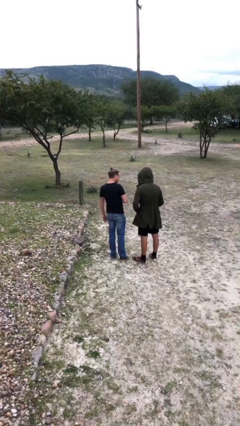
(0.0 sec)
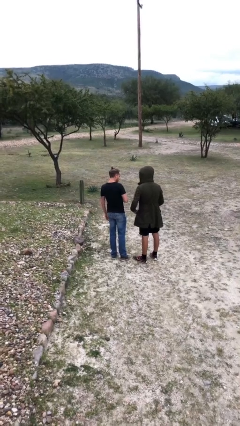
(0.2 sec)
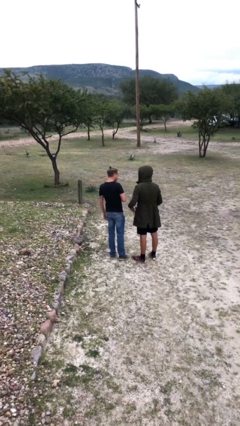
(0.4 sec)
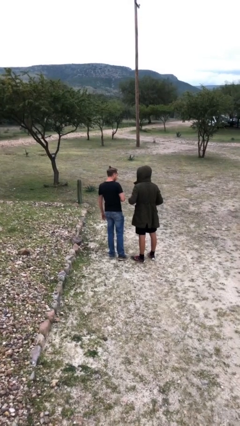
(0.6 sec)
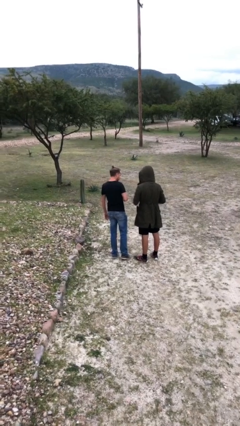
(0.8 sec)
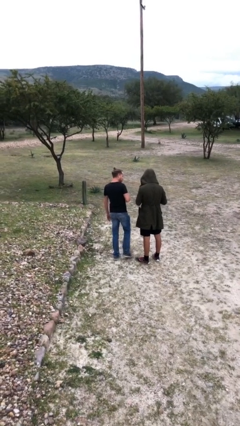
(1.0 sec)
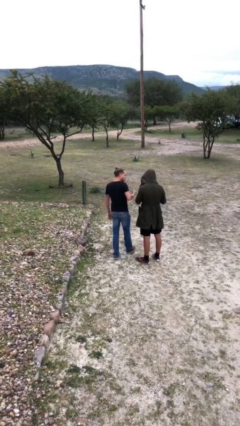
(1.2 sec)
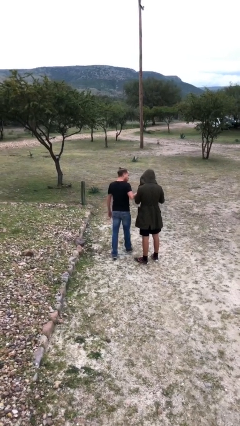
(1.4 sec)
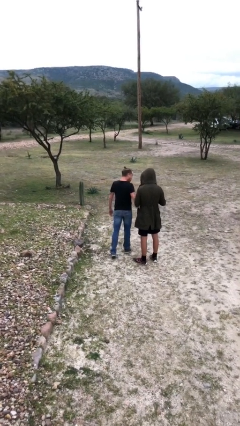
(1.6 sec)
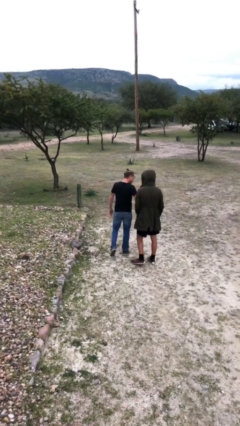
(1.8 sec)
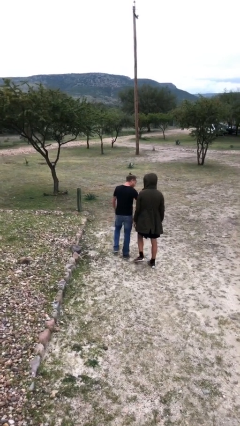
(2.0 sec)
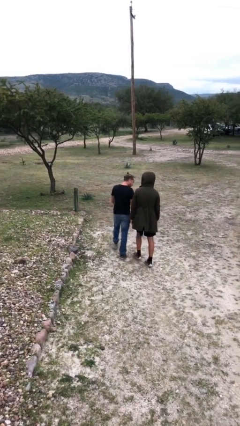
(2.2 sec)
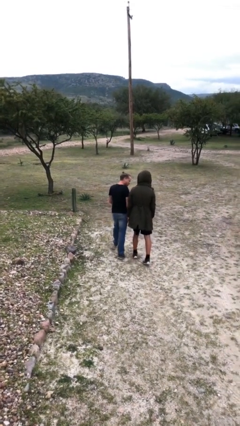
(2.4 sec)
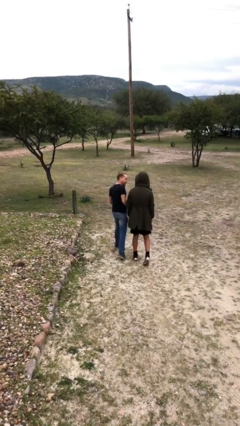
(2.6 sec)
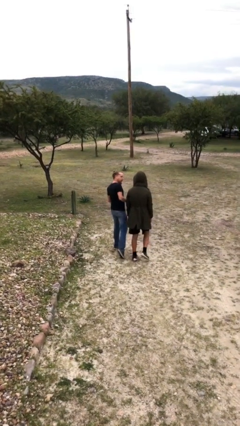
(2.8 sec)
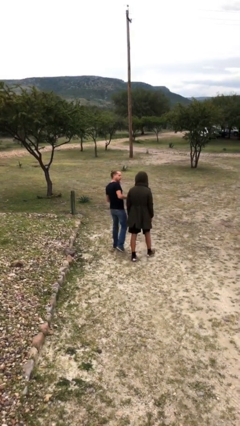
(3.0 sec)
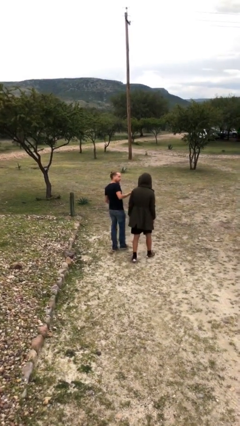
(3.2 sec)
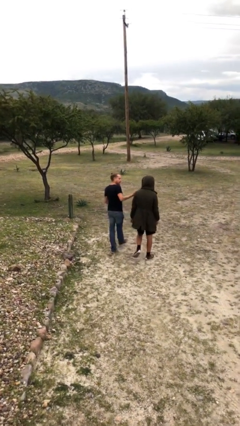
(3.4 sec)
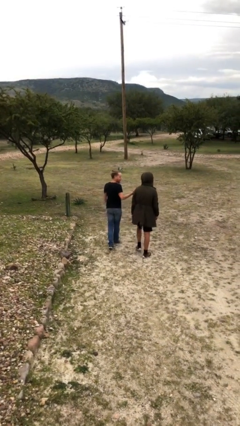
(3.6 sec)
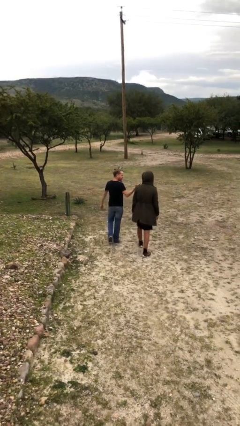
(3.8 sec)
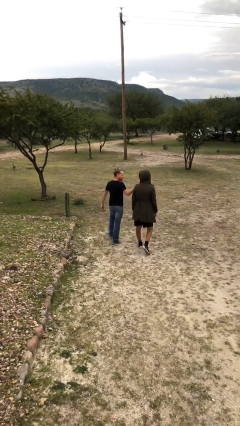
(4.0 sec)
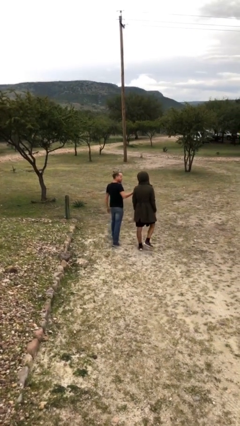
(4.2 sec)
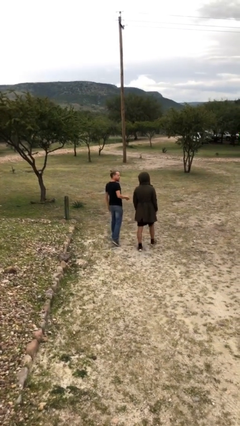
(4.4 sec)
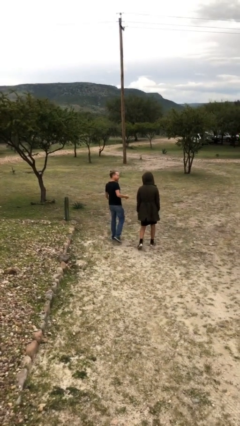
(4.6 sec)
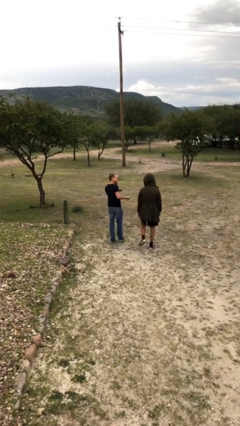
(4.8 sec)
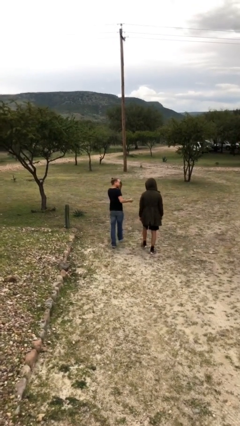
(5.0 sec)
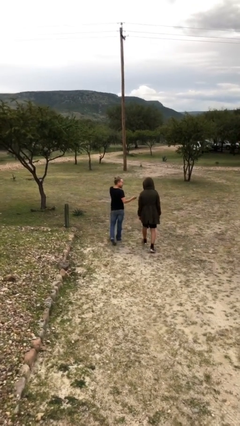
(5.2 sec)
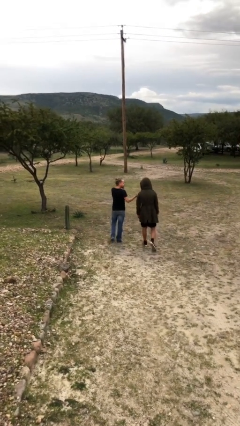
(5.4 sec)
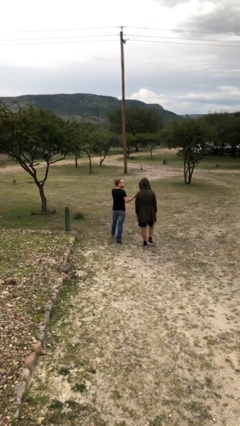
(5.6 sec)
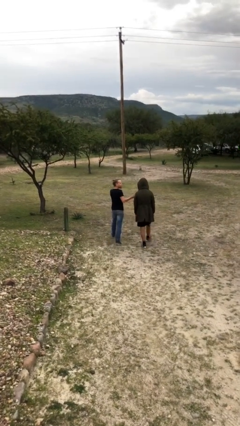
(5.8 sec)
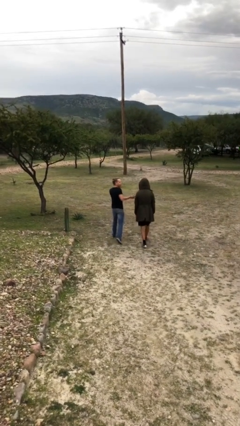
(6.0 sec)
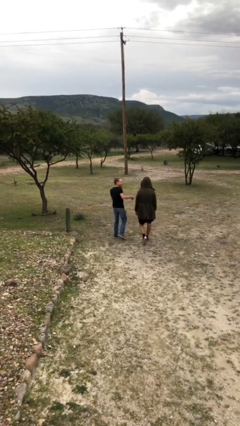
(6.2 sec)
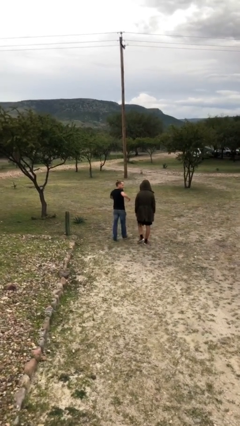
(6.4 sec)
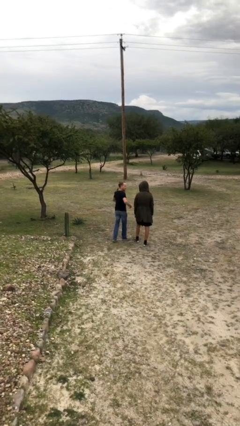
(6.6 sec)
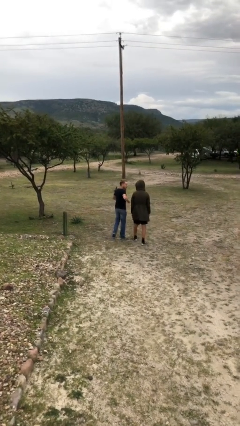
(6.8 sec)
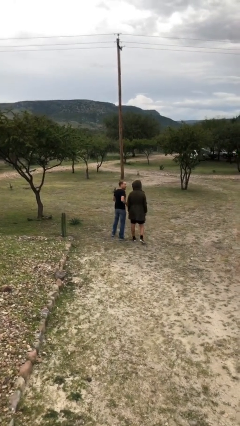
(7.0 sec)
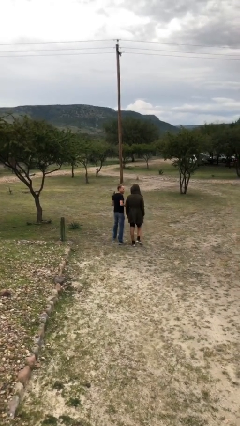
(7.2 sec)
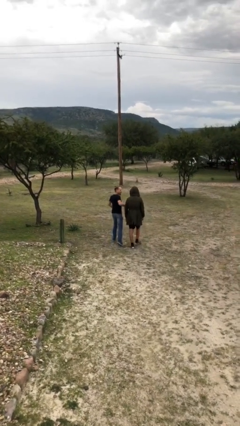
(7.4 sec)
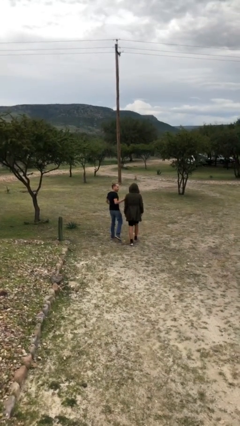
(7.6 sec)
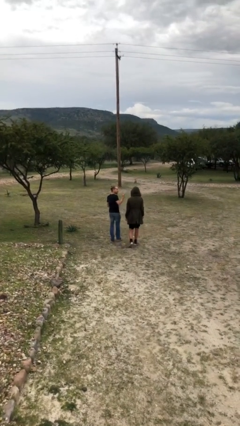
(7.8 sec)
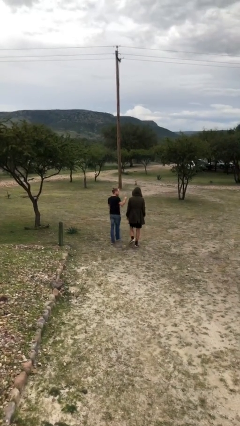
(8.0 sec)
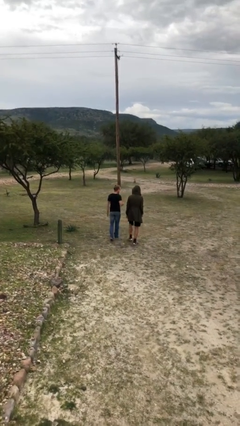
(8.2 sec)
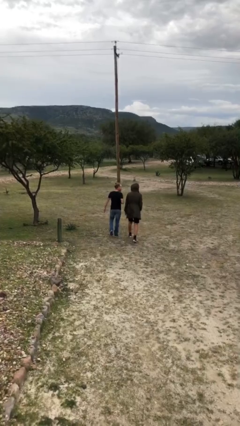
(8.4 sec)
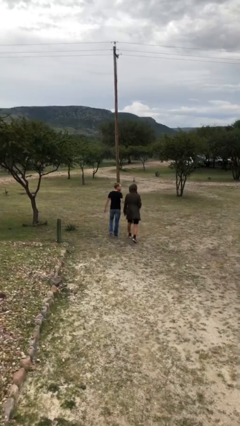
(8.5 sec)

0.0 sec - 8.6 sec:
person talks to person

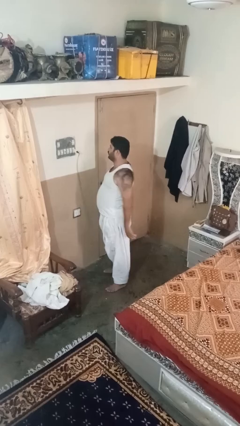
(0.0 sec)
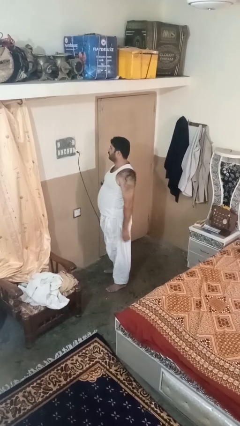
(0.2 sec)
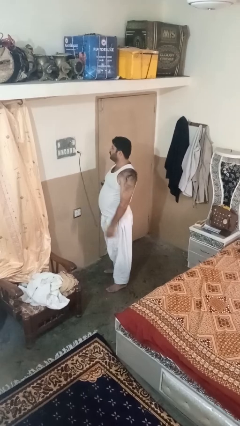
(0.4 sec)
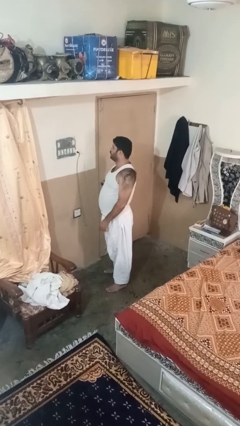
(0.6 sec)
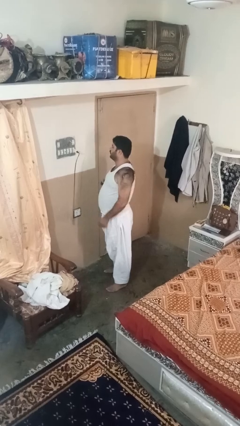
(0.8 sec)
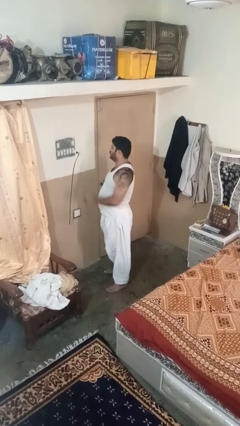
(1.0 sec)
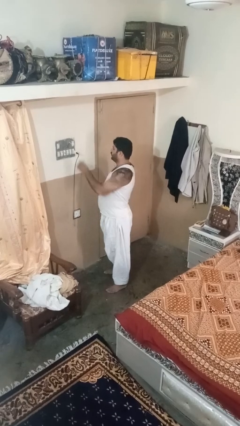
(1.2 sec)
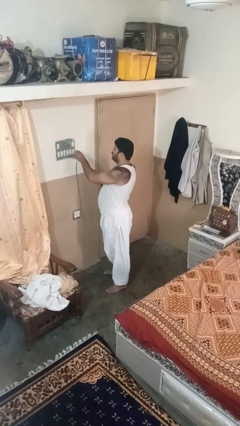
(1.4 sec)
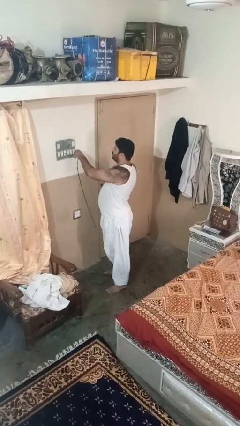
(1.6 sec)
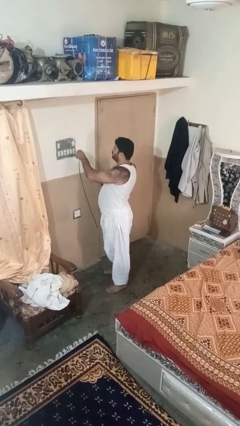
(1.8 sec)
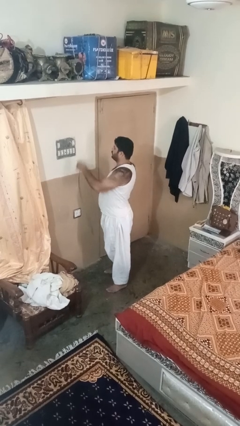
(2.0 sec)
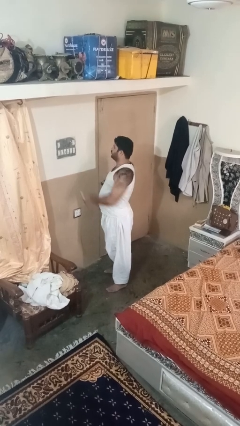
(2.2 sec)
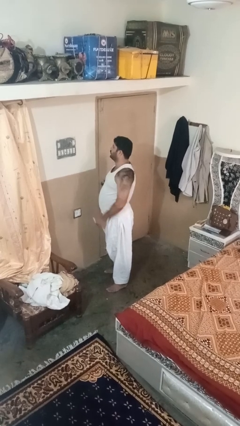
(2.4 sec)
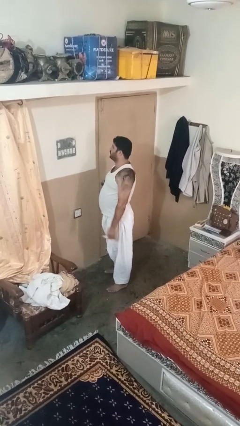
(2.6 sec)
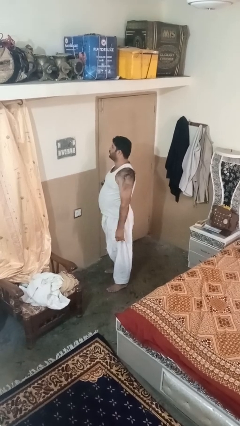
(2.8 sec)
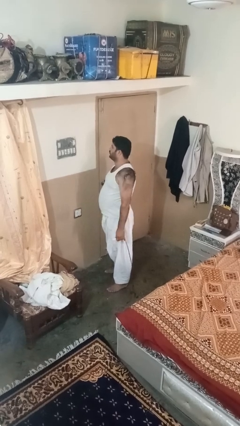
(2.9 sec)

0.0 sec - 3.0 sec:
person unplugs from electrical socket

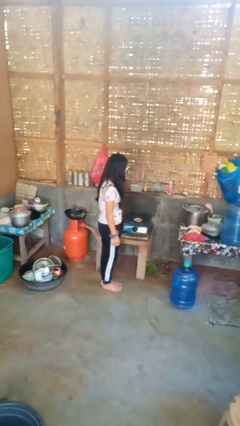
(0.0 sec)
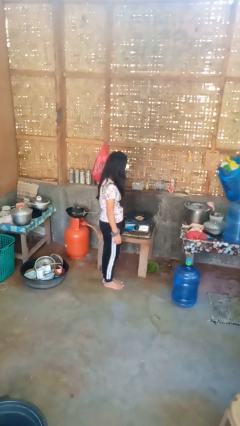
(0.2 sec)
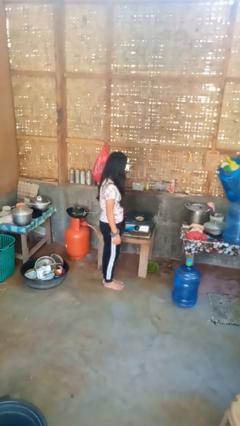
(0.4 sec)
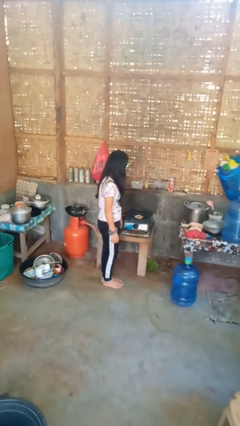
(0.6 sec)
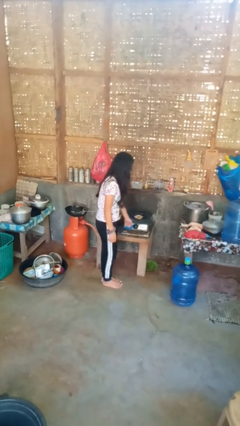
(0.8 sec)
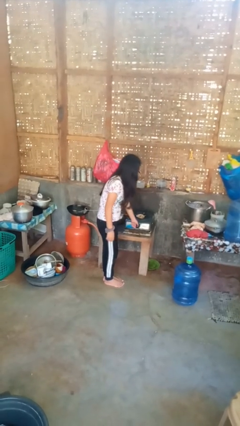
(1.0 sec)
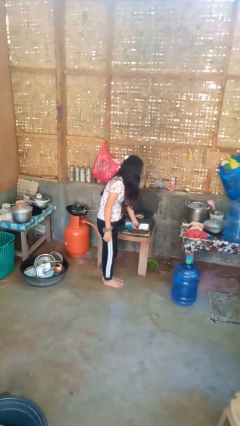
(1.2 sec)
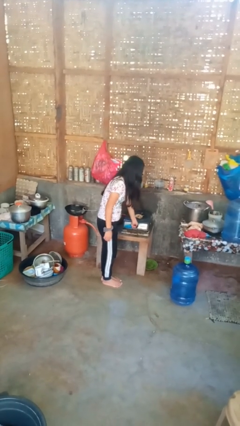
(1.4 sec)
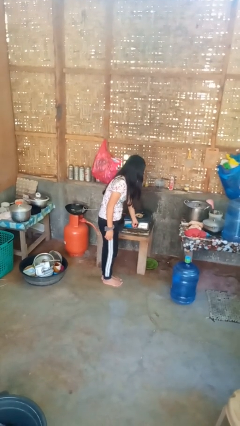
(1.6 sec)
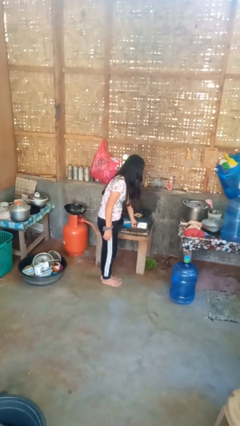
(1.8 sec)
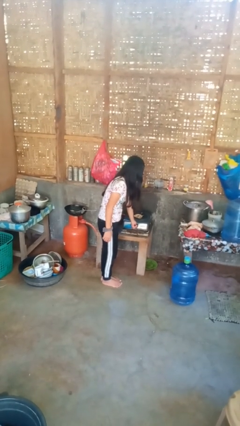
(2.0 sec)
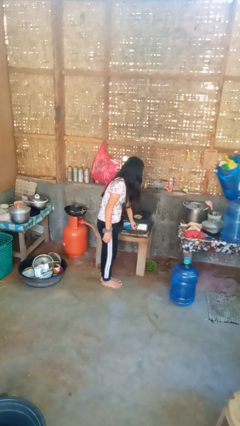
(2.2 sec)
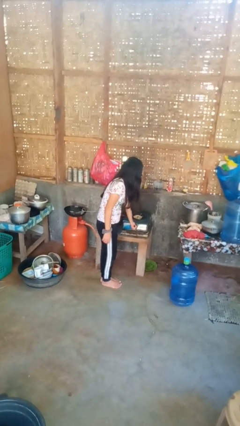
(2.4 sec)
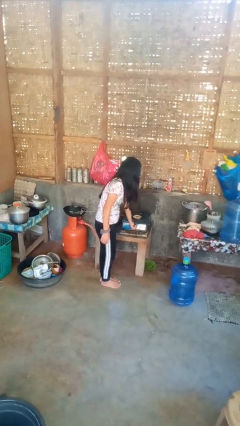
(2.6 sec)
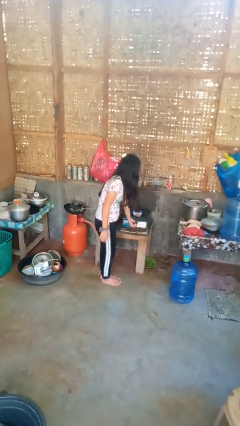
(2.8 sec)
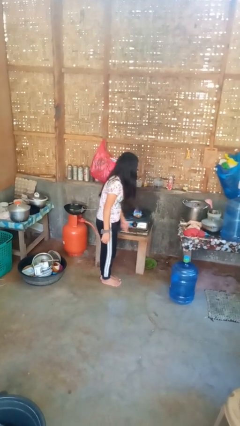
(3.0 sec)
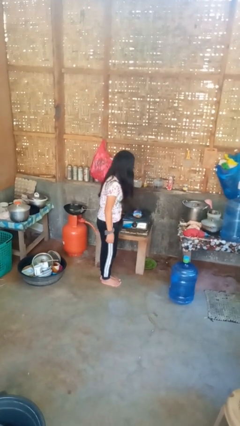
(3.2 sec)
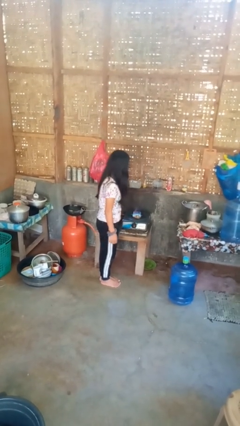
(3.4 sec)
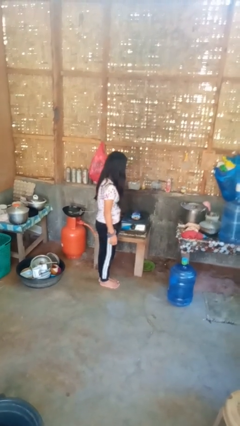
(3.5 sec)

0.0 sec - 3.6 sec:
person turns on stovetop

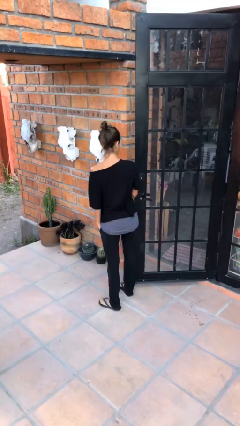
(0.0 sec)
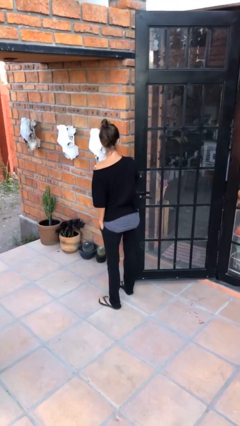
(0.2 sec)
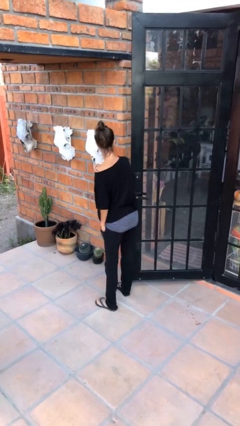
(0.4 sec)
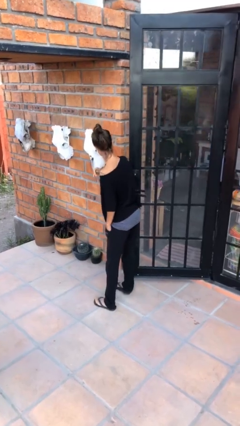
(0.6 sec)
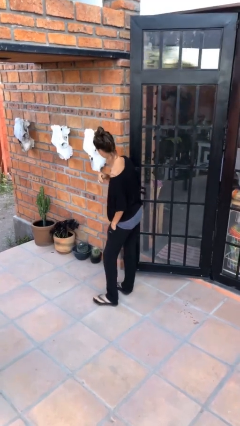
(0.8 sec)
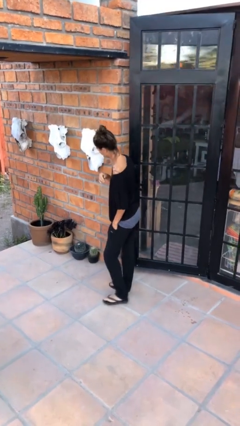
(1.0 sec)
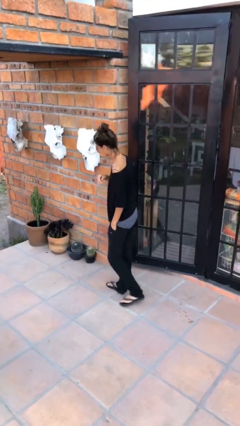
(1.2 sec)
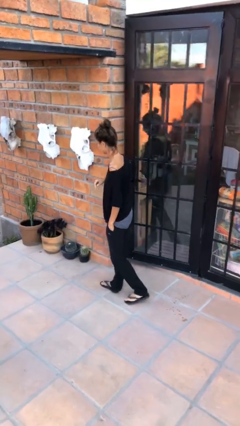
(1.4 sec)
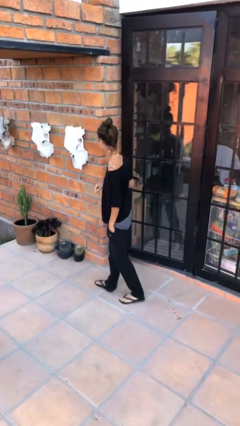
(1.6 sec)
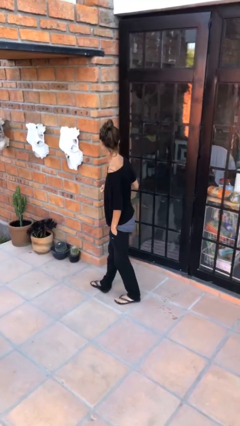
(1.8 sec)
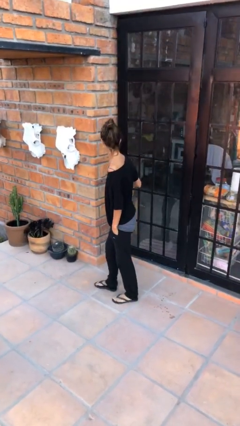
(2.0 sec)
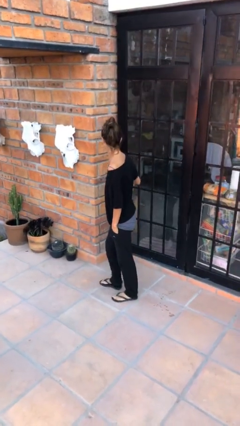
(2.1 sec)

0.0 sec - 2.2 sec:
person closes door with hip

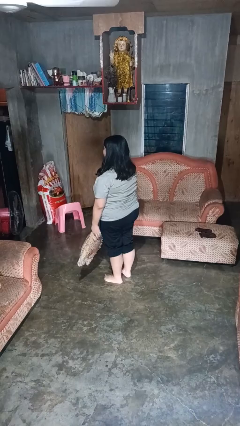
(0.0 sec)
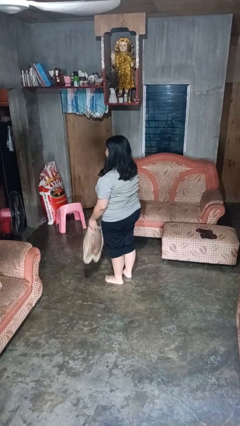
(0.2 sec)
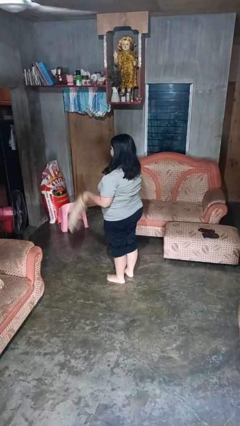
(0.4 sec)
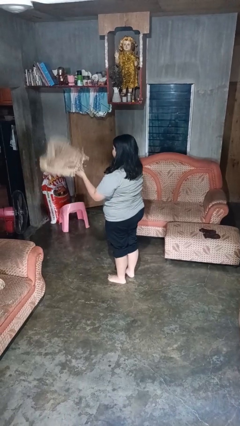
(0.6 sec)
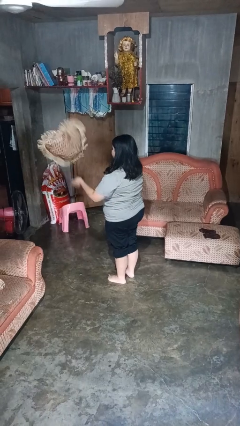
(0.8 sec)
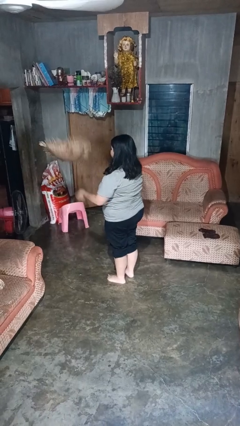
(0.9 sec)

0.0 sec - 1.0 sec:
person throws object into air
